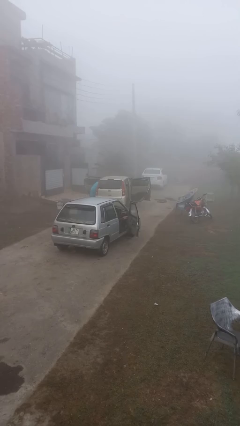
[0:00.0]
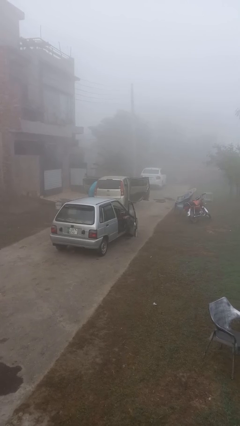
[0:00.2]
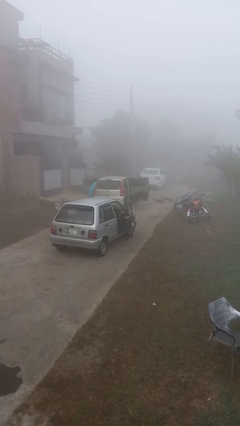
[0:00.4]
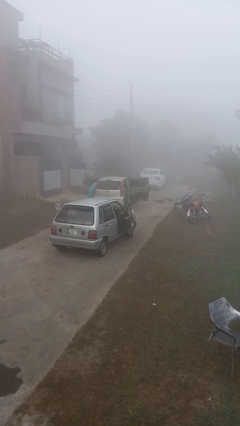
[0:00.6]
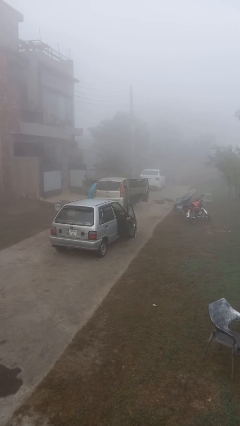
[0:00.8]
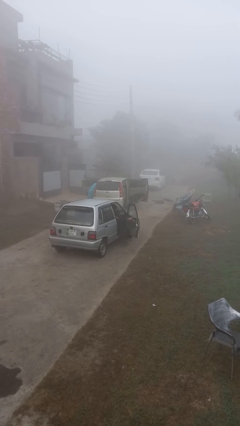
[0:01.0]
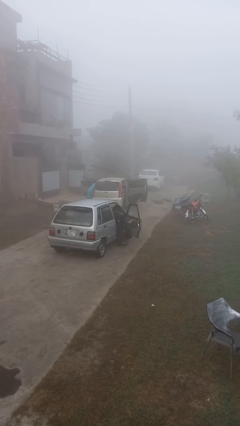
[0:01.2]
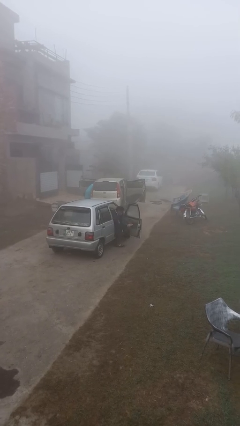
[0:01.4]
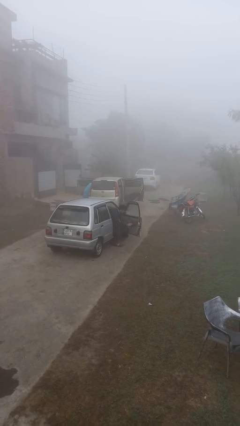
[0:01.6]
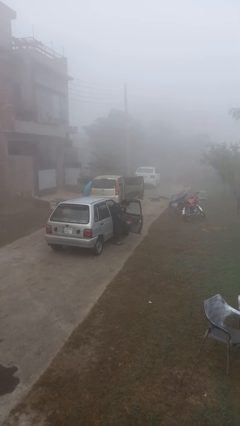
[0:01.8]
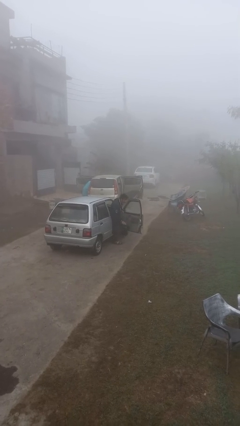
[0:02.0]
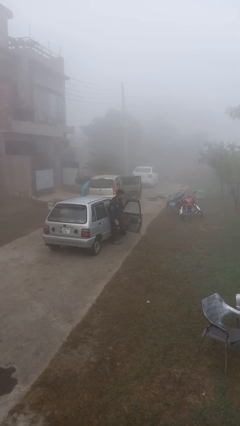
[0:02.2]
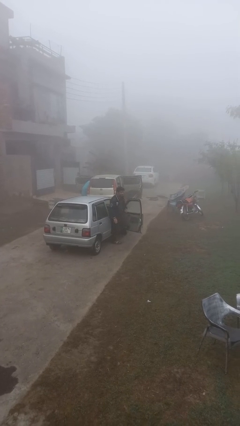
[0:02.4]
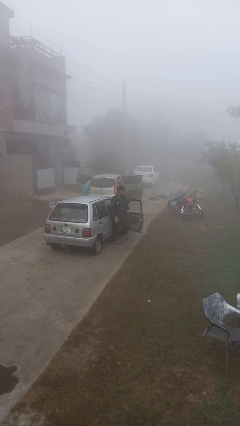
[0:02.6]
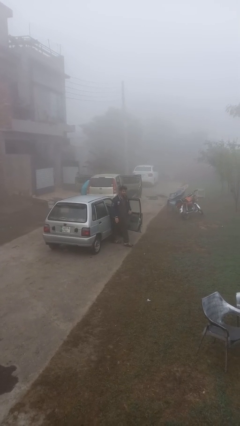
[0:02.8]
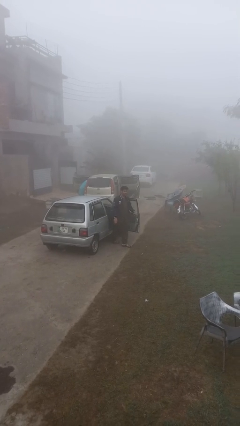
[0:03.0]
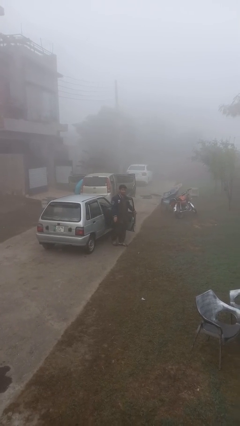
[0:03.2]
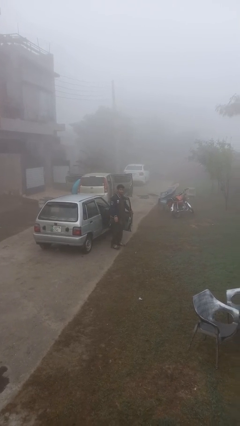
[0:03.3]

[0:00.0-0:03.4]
person exits car

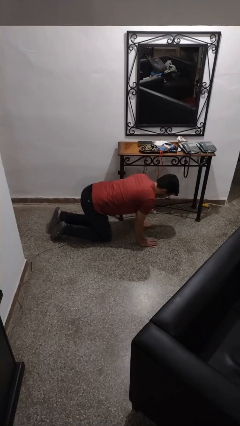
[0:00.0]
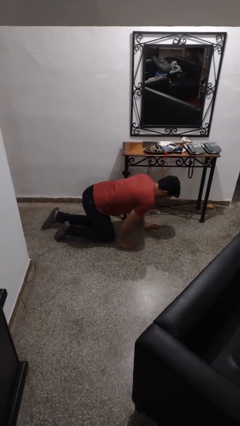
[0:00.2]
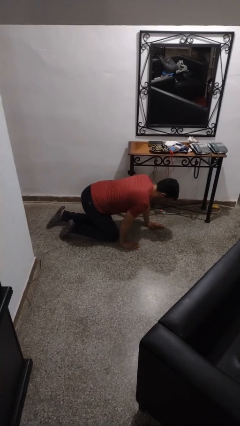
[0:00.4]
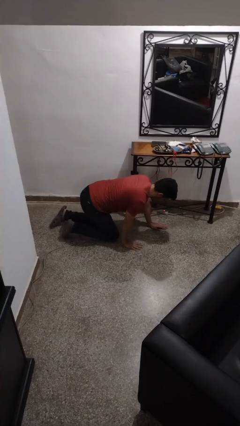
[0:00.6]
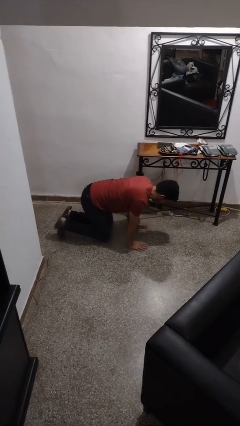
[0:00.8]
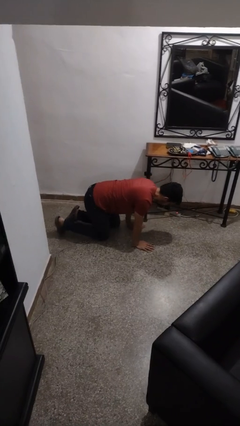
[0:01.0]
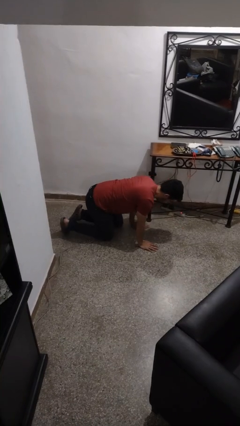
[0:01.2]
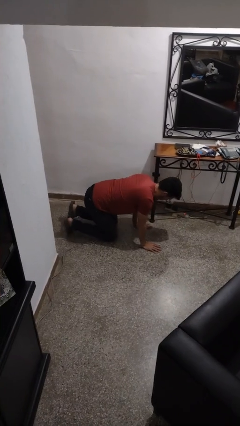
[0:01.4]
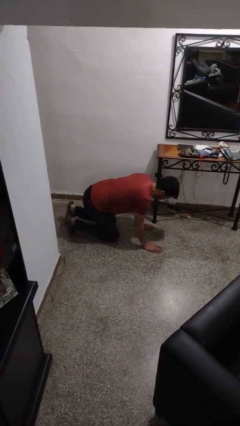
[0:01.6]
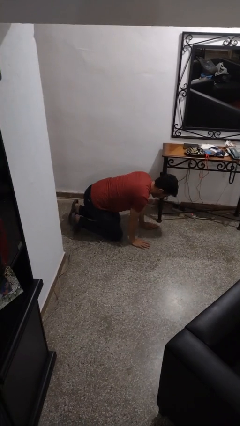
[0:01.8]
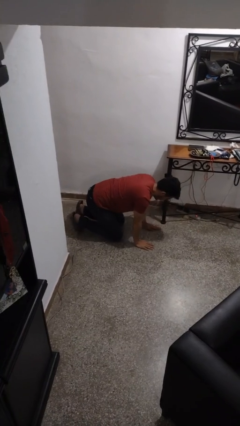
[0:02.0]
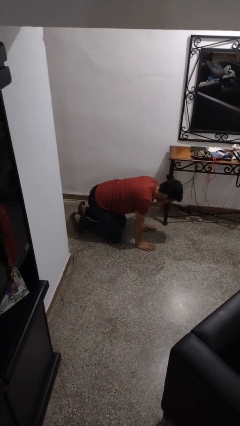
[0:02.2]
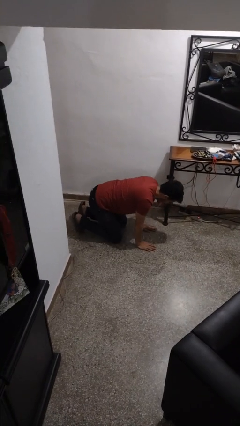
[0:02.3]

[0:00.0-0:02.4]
person crawls

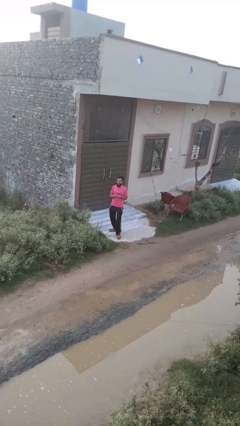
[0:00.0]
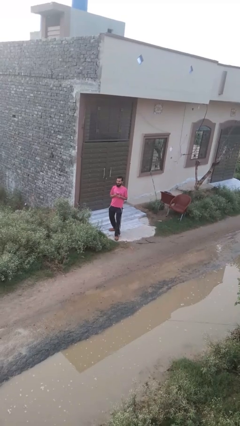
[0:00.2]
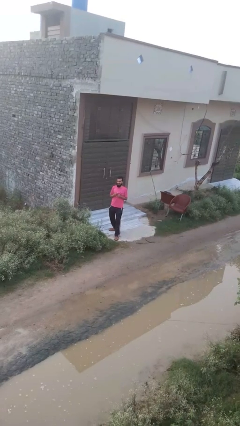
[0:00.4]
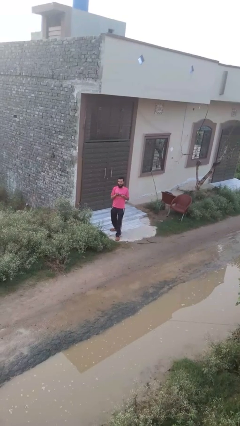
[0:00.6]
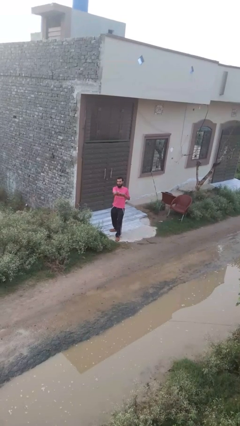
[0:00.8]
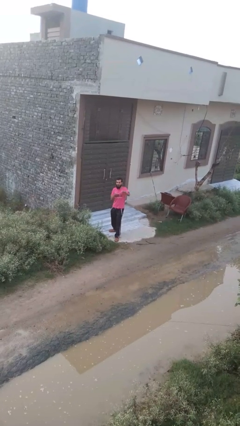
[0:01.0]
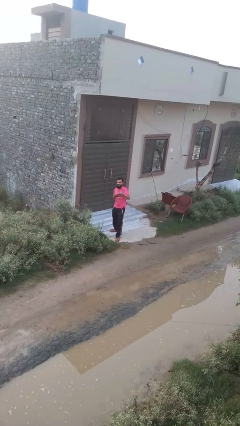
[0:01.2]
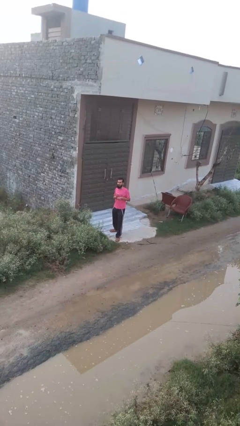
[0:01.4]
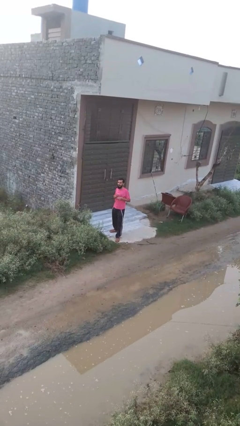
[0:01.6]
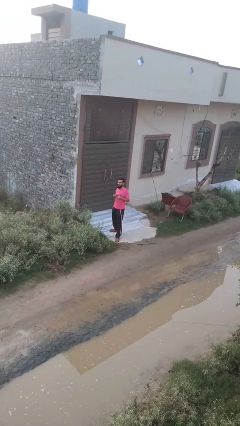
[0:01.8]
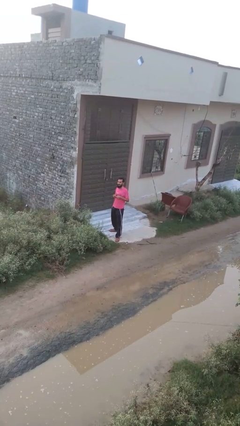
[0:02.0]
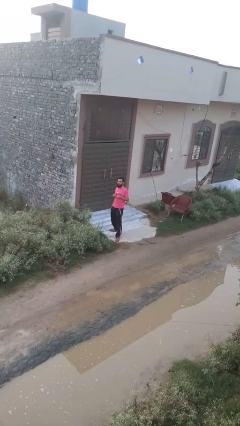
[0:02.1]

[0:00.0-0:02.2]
person punches

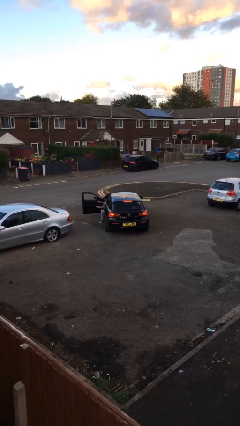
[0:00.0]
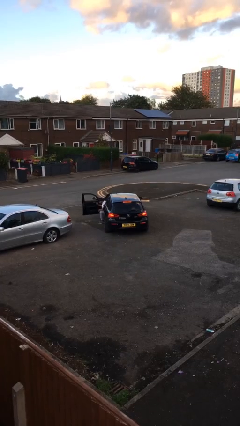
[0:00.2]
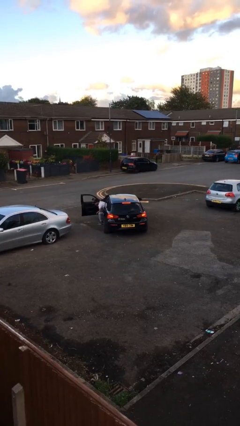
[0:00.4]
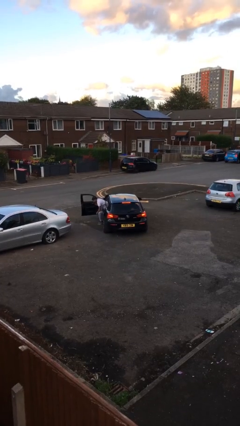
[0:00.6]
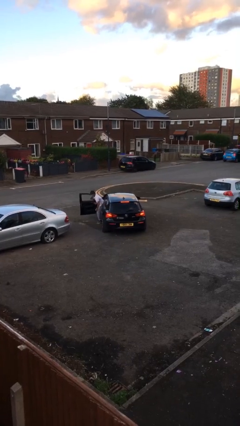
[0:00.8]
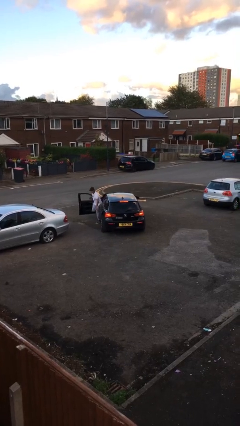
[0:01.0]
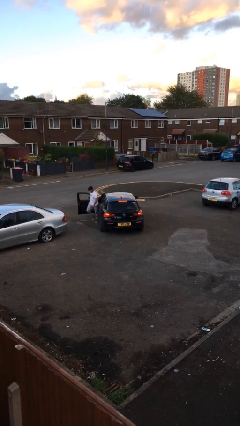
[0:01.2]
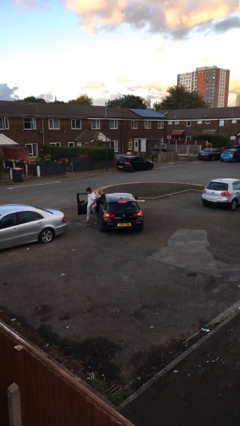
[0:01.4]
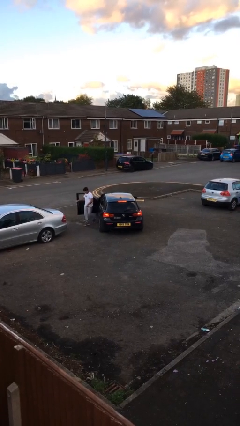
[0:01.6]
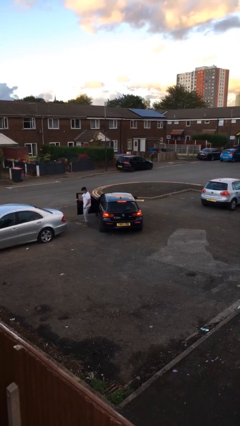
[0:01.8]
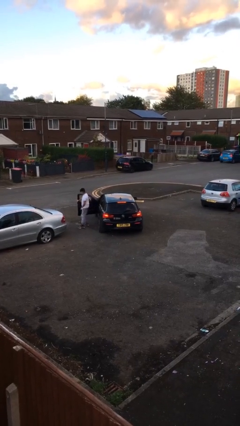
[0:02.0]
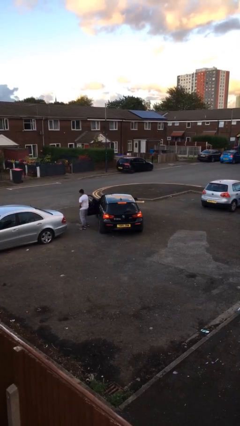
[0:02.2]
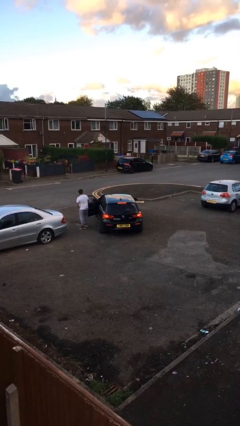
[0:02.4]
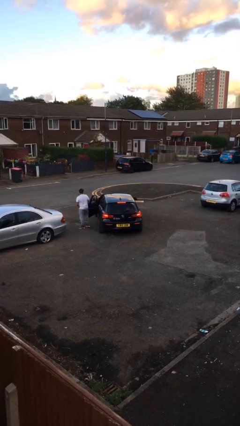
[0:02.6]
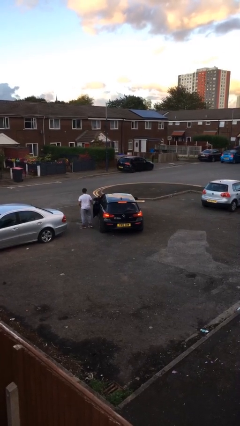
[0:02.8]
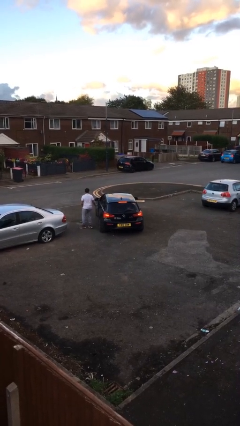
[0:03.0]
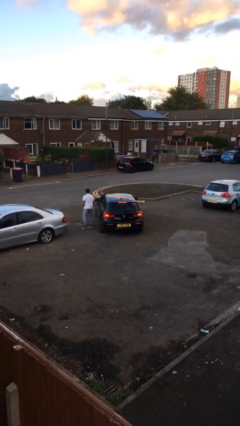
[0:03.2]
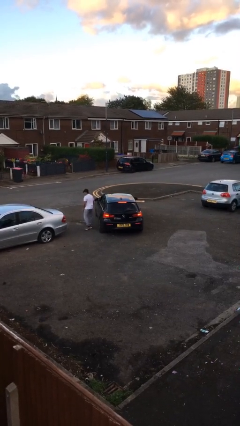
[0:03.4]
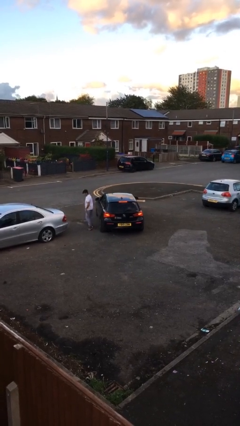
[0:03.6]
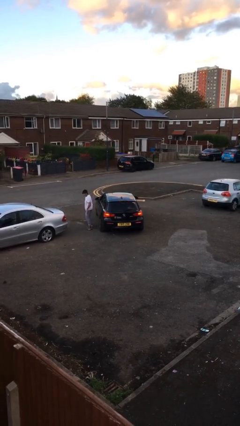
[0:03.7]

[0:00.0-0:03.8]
car drops off person

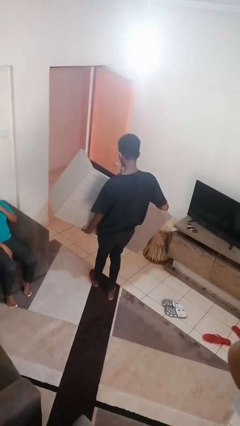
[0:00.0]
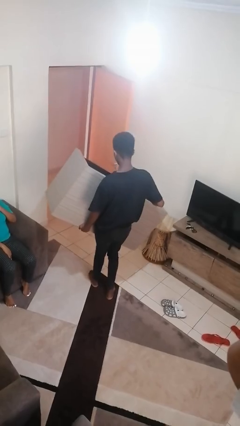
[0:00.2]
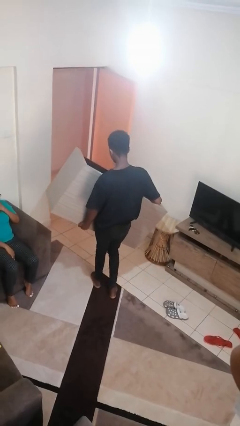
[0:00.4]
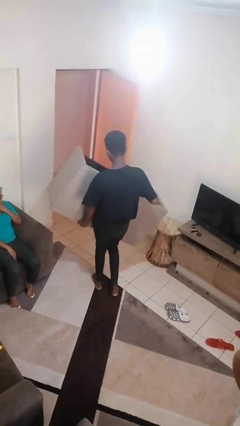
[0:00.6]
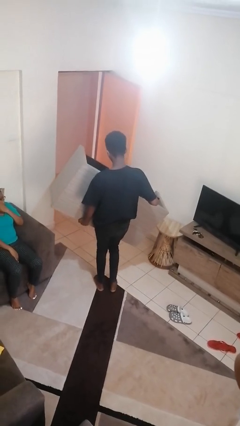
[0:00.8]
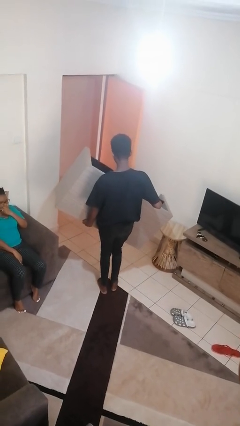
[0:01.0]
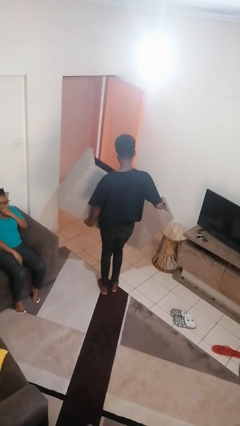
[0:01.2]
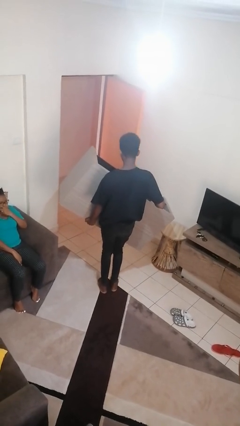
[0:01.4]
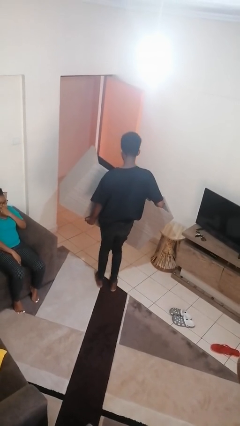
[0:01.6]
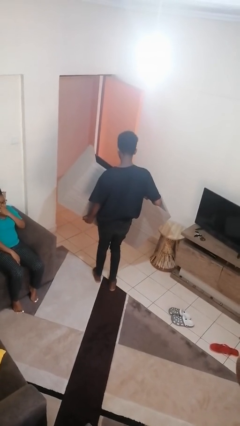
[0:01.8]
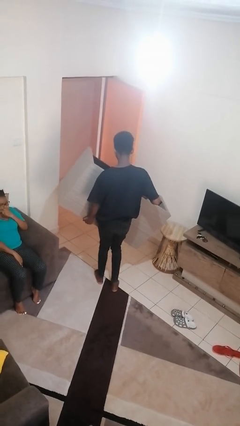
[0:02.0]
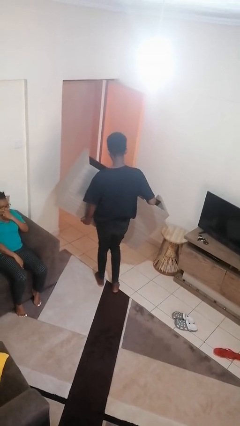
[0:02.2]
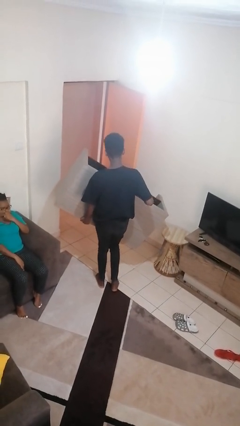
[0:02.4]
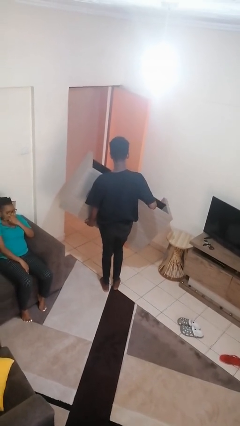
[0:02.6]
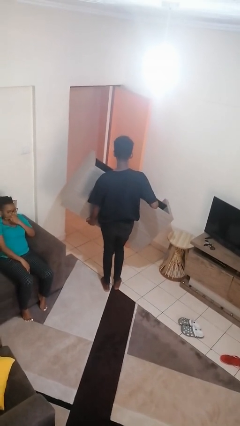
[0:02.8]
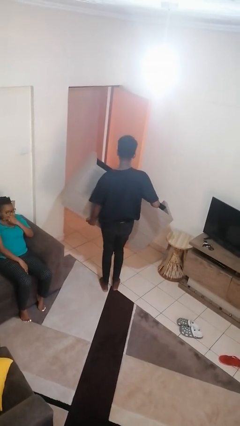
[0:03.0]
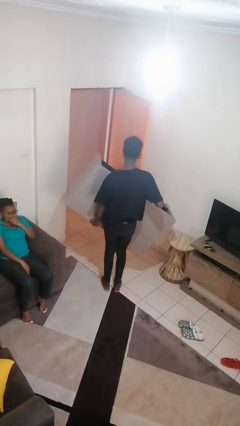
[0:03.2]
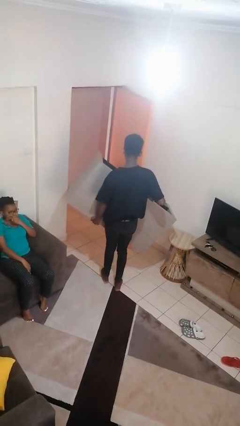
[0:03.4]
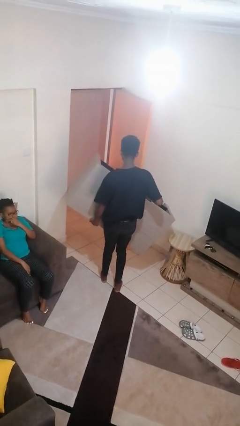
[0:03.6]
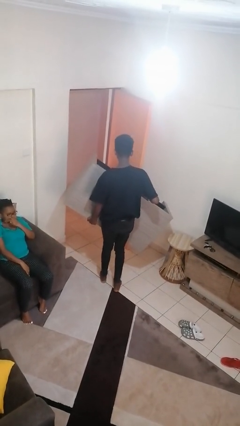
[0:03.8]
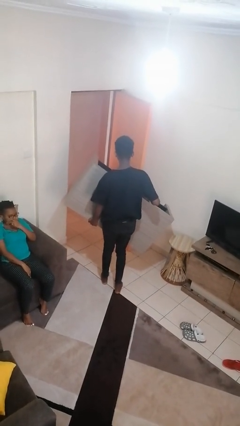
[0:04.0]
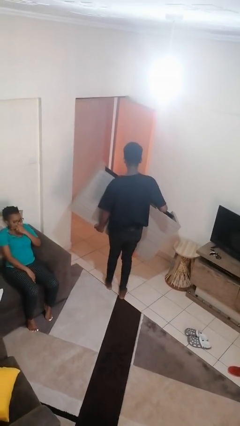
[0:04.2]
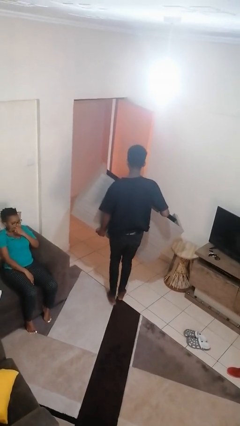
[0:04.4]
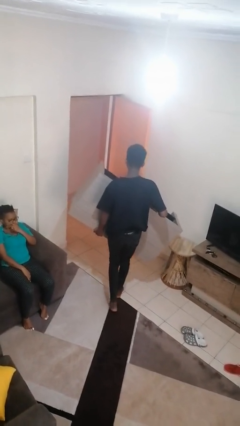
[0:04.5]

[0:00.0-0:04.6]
person carries furniture

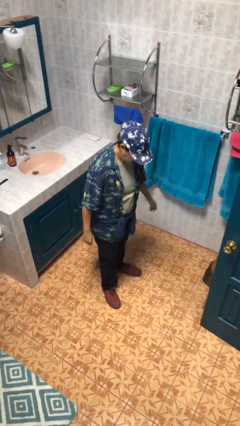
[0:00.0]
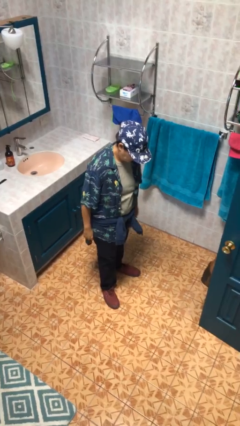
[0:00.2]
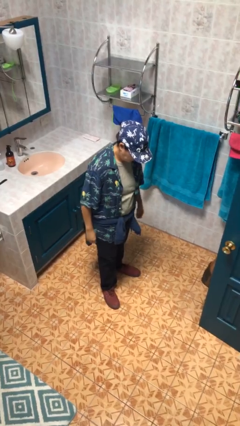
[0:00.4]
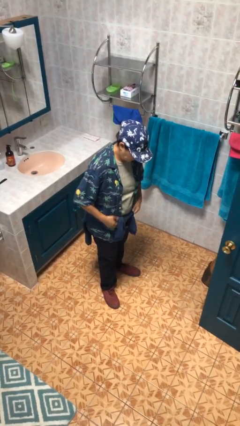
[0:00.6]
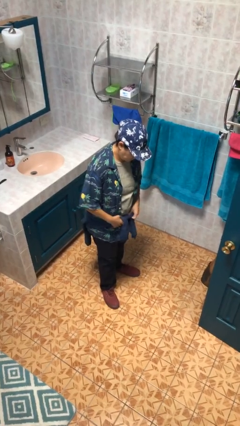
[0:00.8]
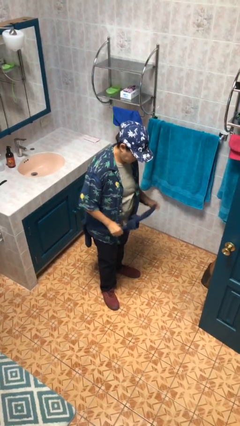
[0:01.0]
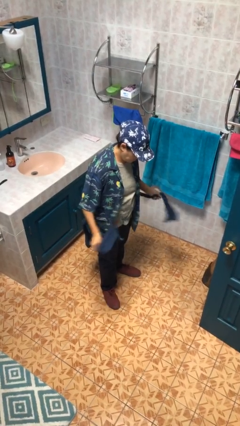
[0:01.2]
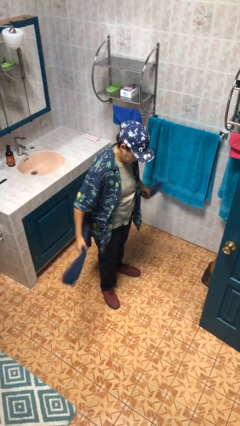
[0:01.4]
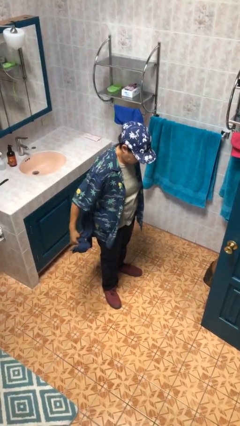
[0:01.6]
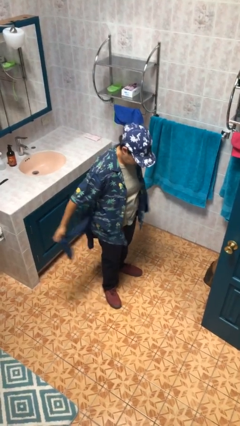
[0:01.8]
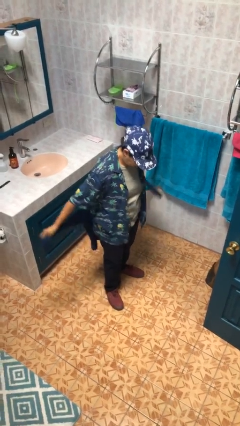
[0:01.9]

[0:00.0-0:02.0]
person unties jacket around waist
